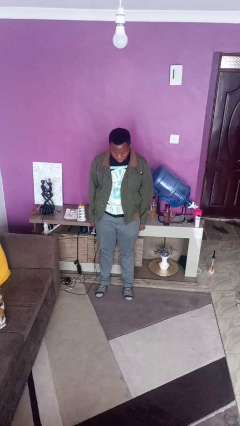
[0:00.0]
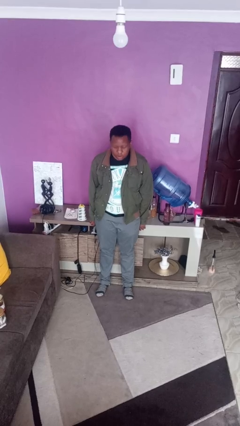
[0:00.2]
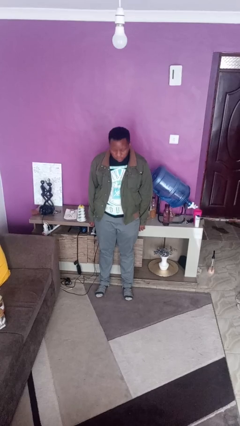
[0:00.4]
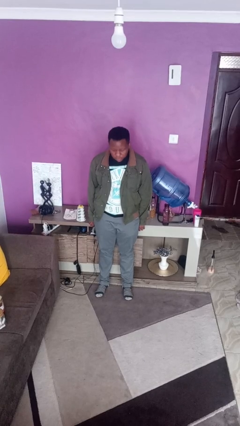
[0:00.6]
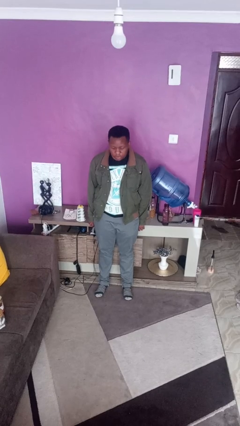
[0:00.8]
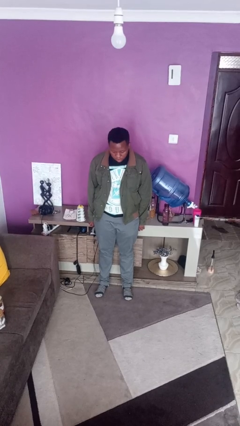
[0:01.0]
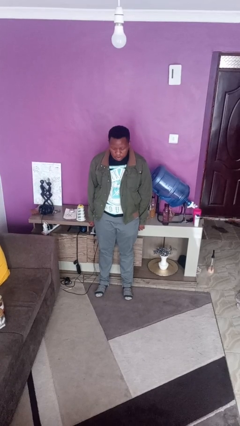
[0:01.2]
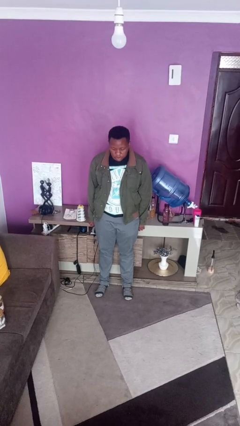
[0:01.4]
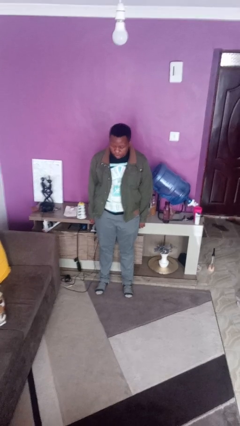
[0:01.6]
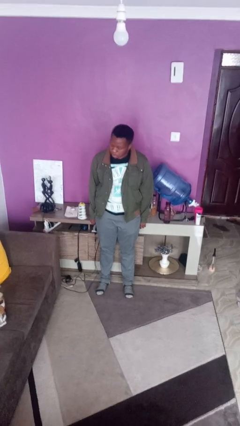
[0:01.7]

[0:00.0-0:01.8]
person nods head

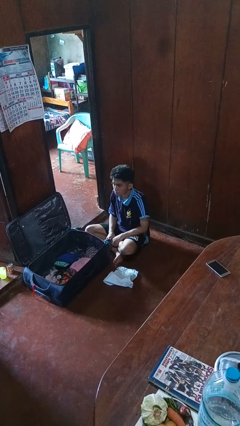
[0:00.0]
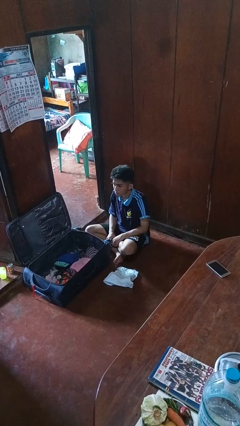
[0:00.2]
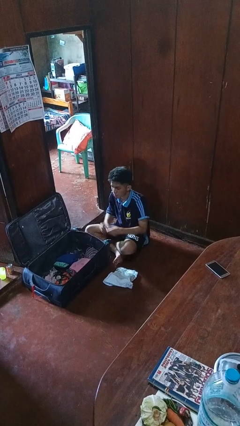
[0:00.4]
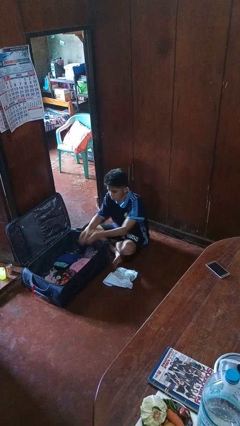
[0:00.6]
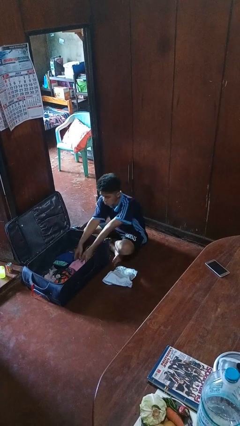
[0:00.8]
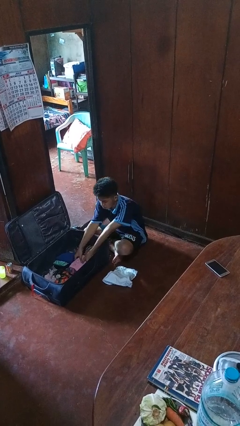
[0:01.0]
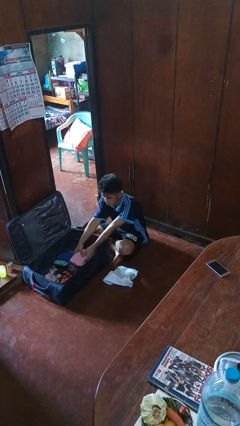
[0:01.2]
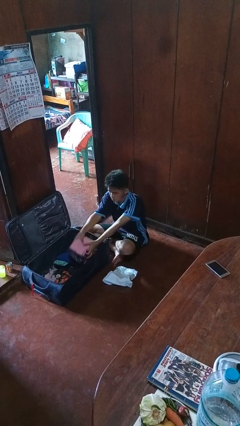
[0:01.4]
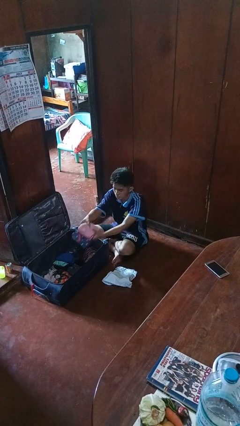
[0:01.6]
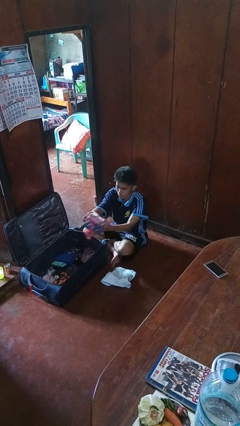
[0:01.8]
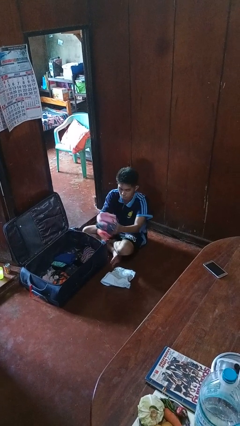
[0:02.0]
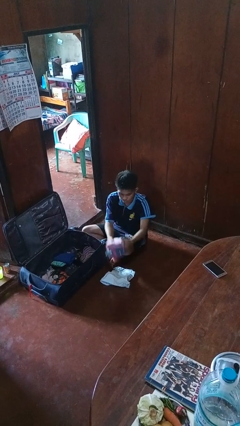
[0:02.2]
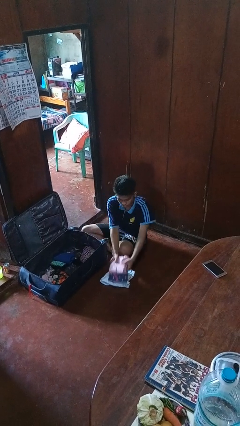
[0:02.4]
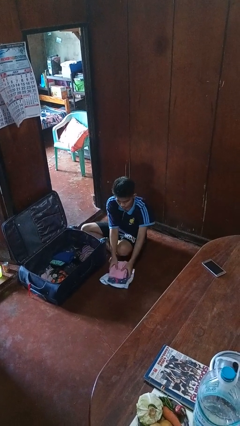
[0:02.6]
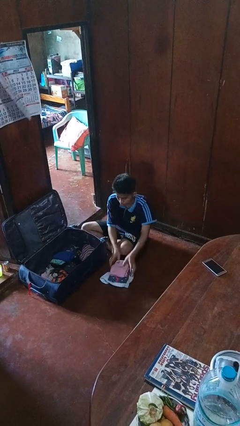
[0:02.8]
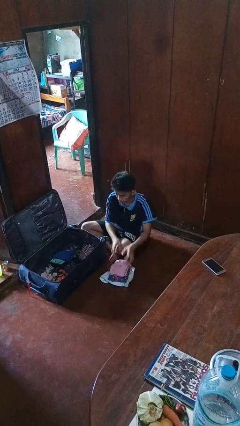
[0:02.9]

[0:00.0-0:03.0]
person unloads clothes from suitcase

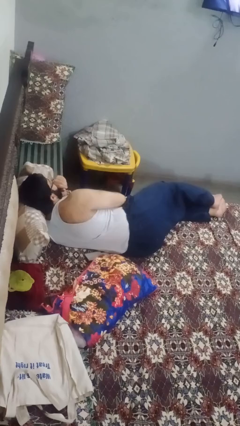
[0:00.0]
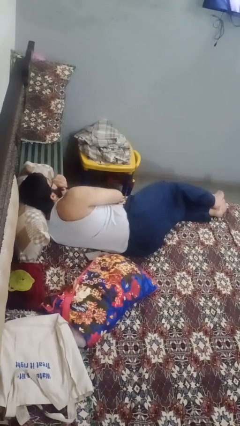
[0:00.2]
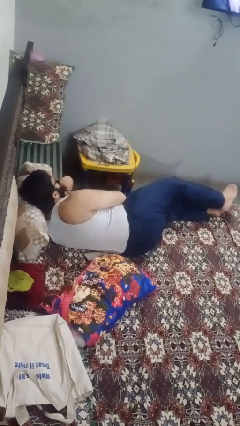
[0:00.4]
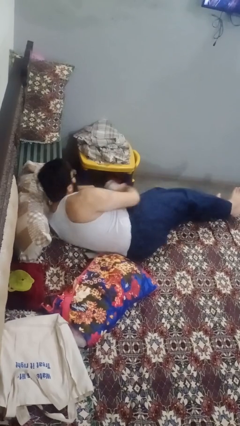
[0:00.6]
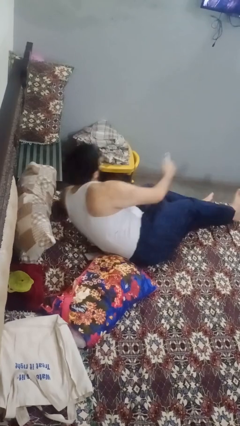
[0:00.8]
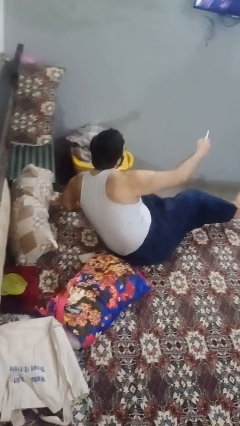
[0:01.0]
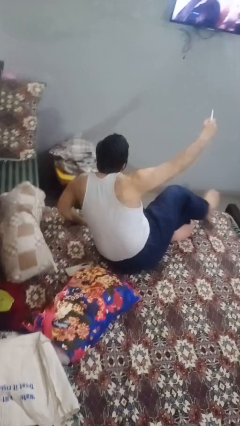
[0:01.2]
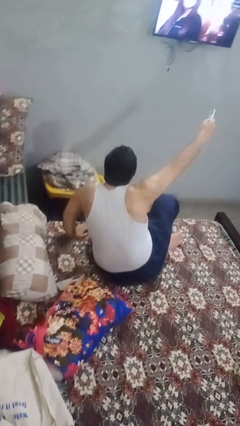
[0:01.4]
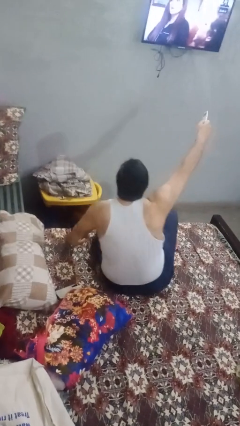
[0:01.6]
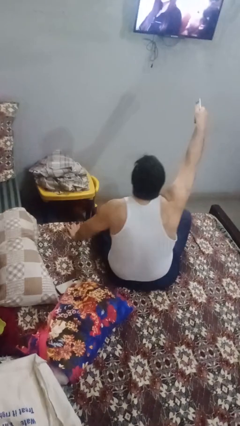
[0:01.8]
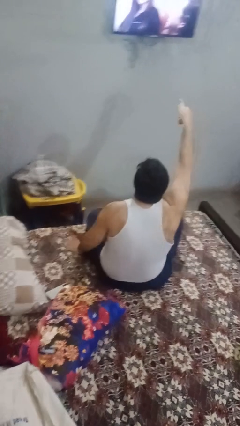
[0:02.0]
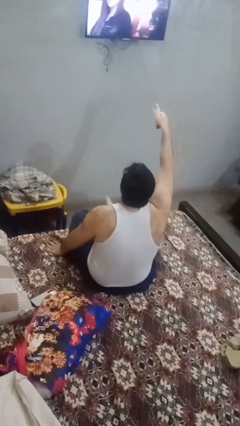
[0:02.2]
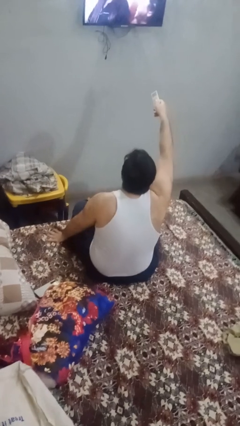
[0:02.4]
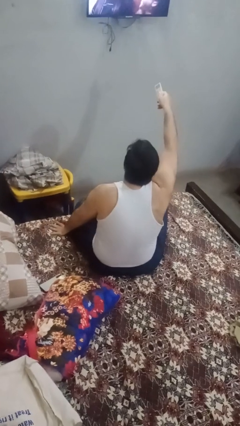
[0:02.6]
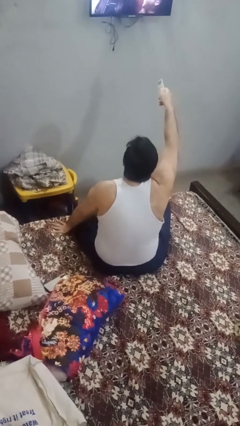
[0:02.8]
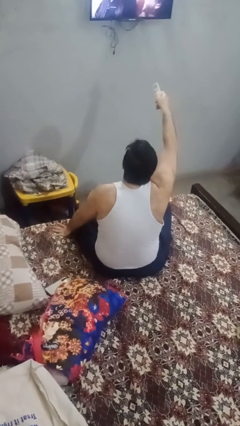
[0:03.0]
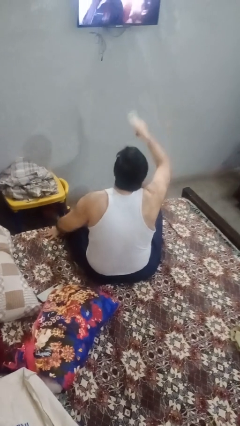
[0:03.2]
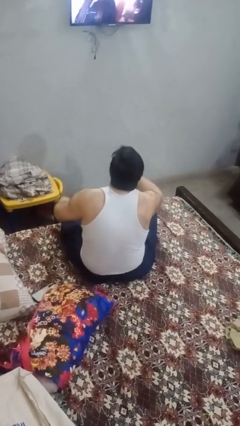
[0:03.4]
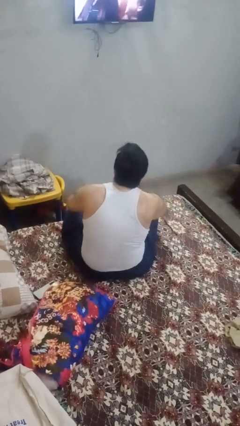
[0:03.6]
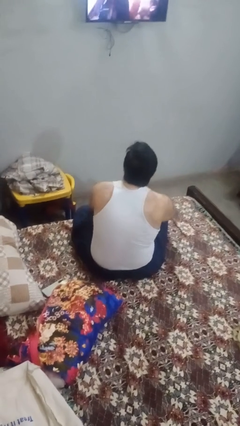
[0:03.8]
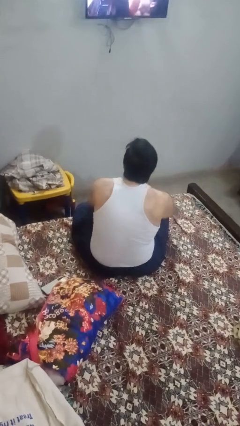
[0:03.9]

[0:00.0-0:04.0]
person uses television remote

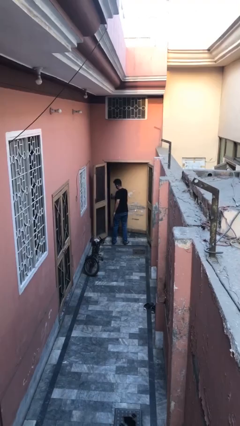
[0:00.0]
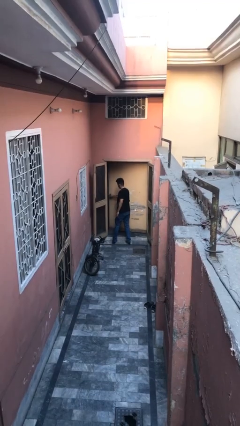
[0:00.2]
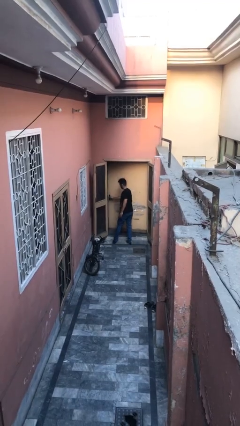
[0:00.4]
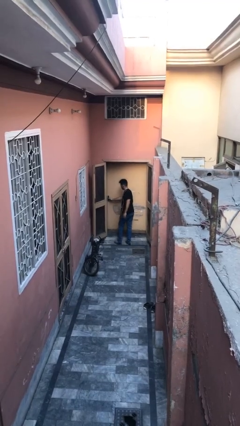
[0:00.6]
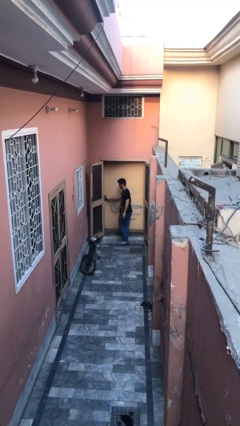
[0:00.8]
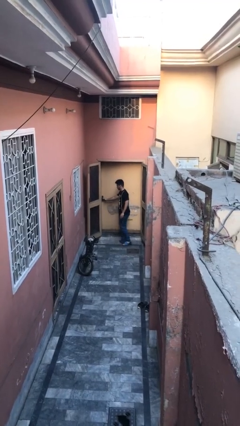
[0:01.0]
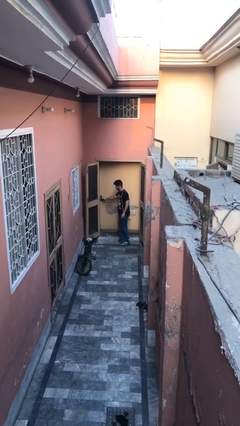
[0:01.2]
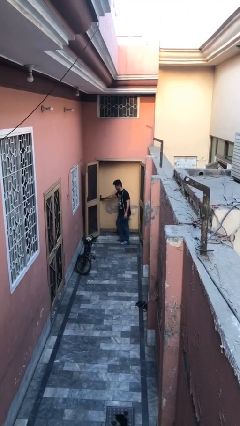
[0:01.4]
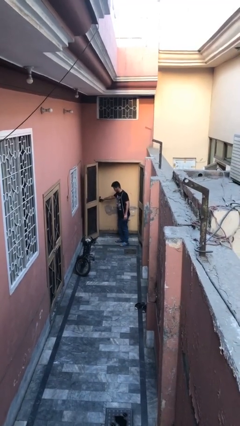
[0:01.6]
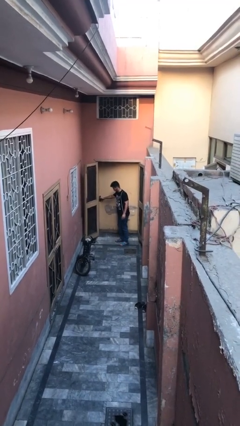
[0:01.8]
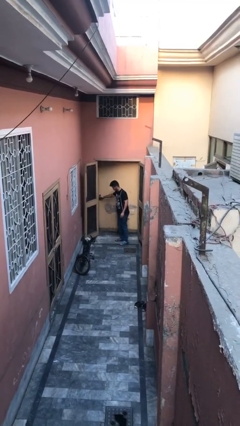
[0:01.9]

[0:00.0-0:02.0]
person closes facility door

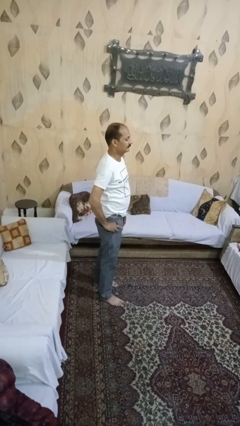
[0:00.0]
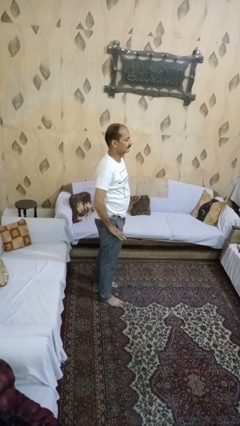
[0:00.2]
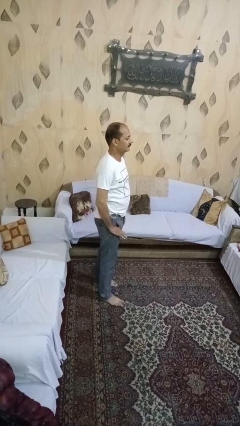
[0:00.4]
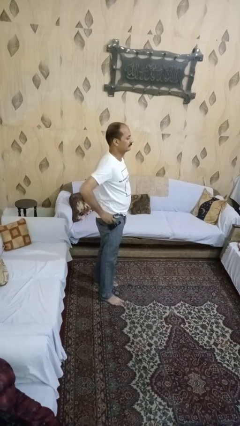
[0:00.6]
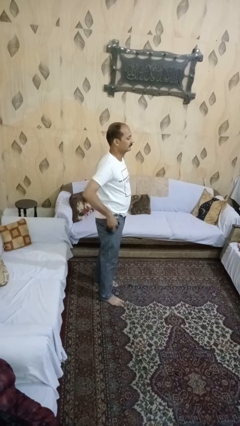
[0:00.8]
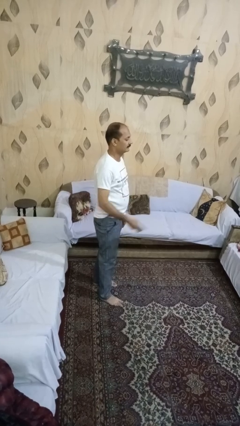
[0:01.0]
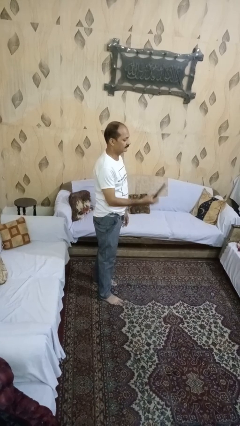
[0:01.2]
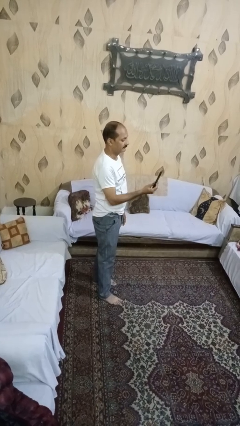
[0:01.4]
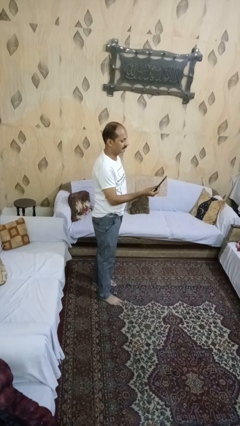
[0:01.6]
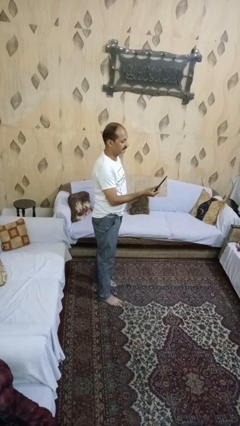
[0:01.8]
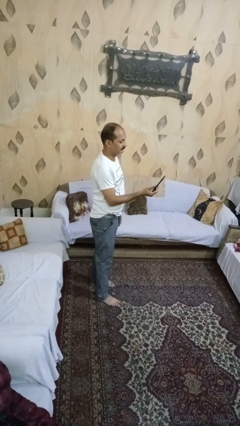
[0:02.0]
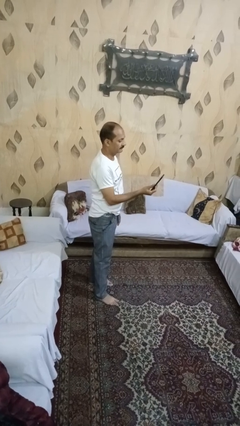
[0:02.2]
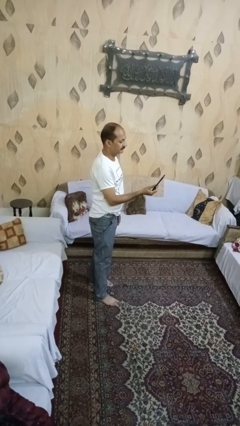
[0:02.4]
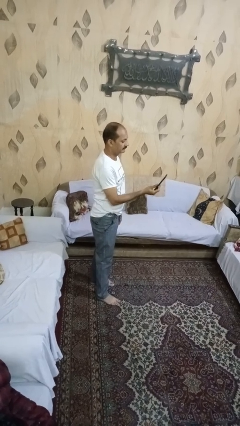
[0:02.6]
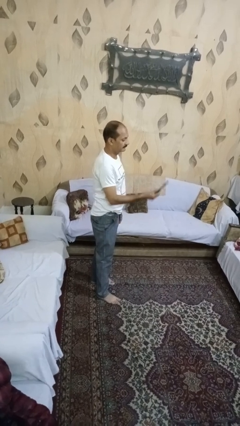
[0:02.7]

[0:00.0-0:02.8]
person takes phone from pocket

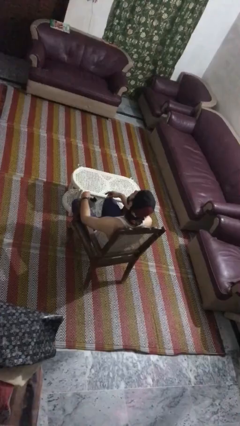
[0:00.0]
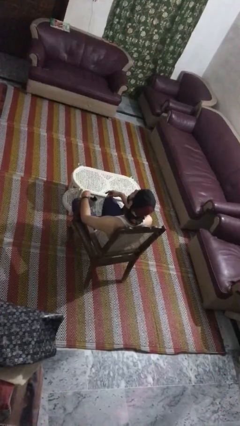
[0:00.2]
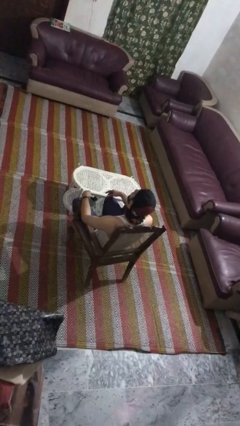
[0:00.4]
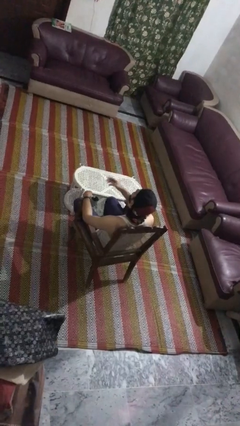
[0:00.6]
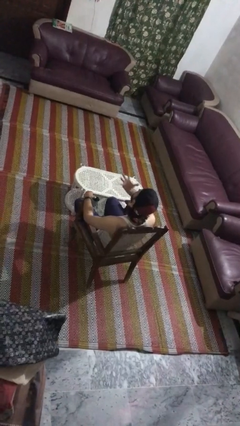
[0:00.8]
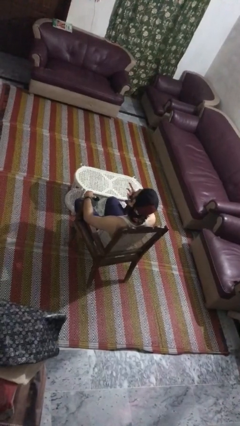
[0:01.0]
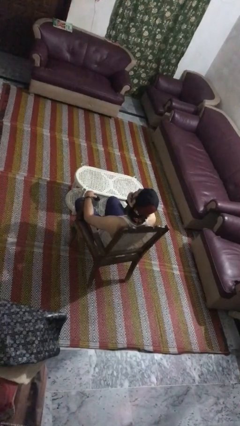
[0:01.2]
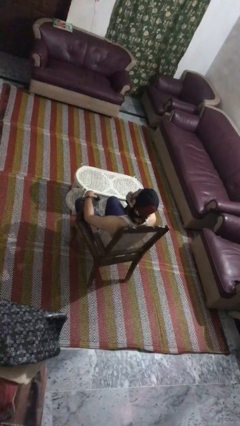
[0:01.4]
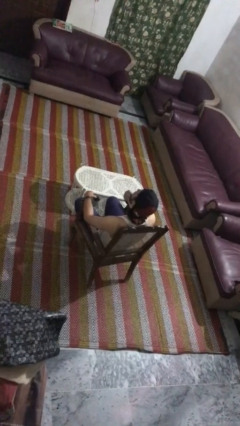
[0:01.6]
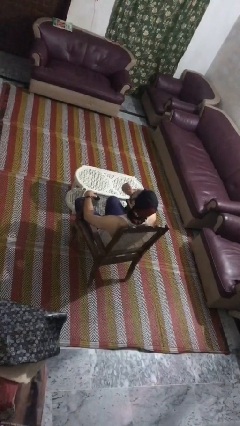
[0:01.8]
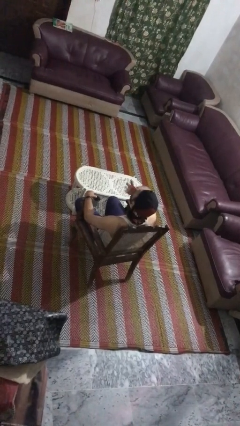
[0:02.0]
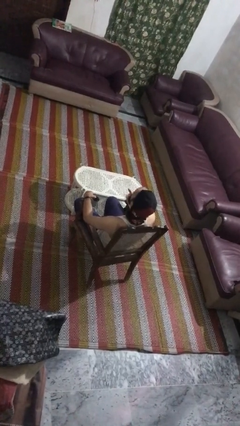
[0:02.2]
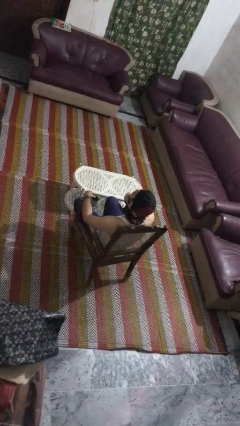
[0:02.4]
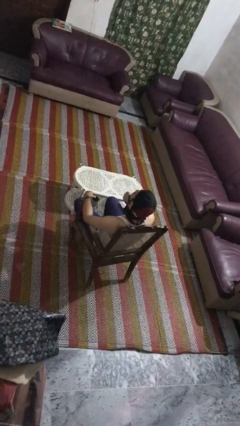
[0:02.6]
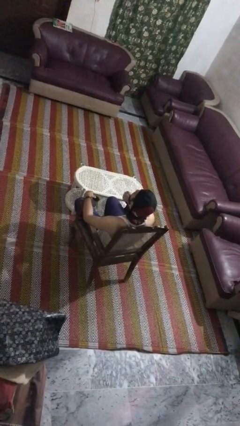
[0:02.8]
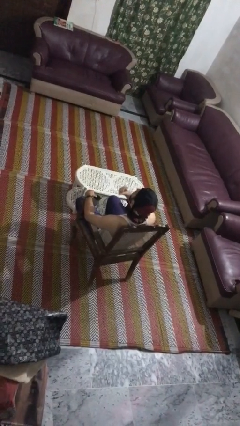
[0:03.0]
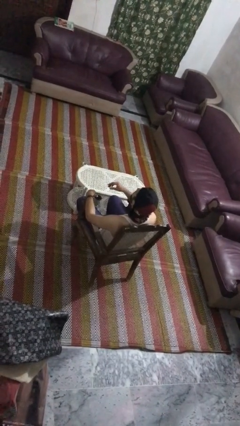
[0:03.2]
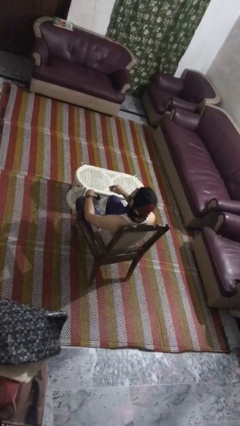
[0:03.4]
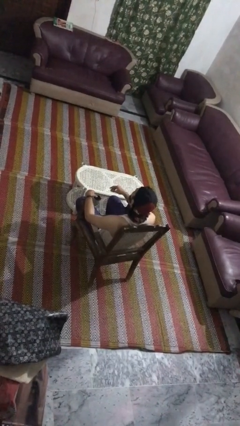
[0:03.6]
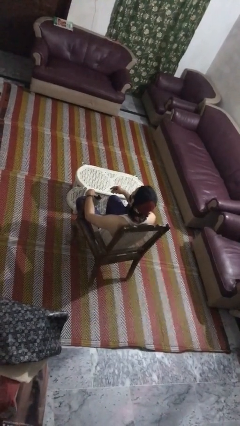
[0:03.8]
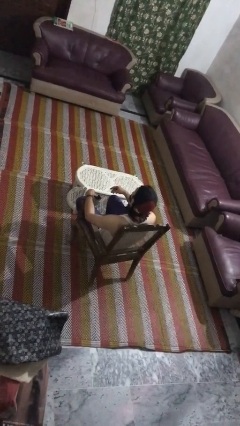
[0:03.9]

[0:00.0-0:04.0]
person strokes chin

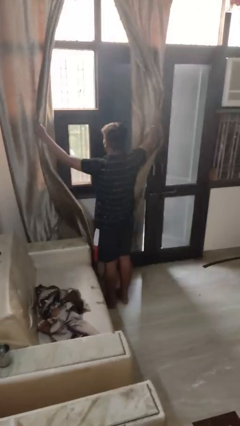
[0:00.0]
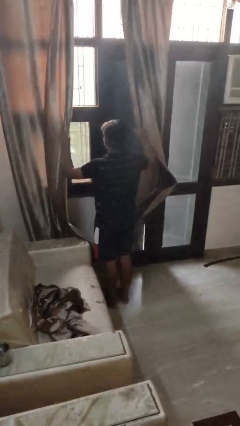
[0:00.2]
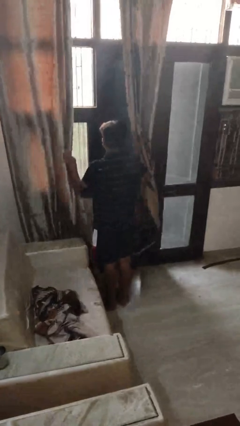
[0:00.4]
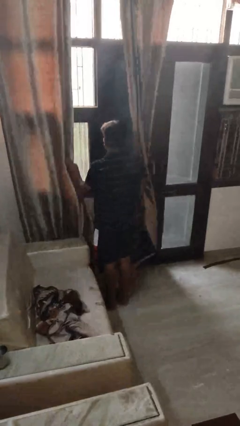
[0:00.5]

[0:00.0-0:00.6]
person opens curtains
